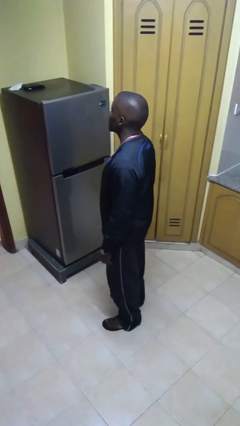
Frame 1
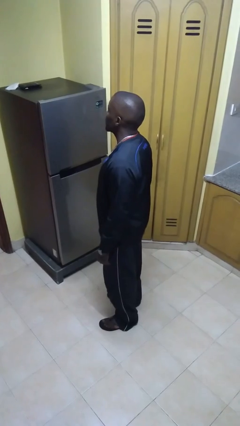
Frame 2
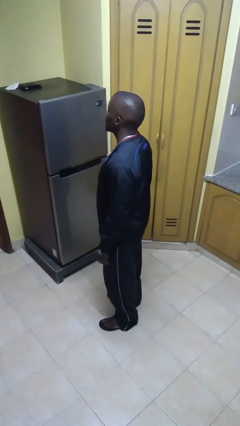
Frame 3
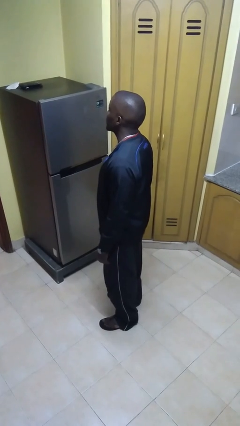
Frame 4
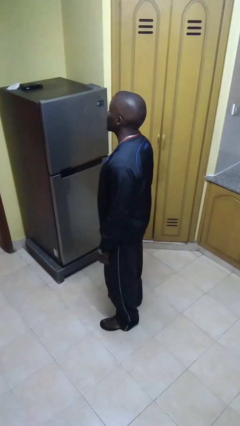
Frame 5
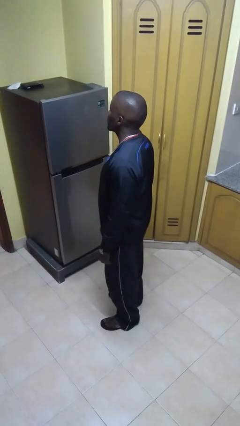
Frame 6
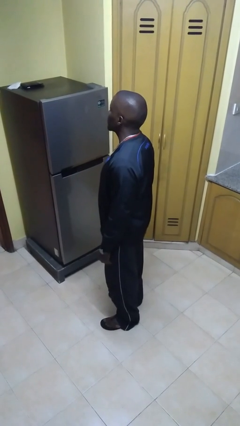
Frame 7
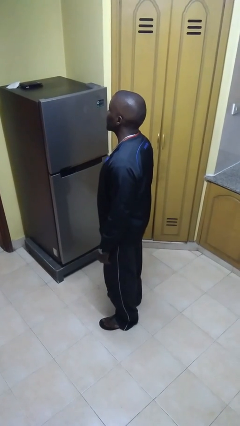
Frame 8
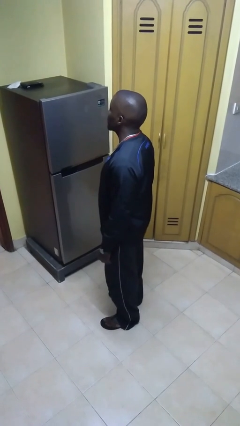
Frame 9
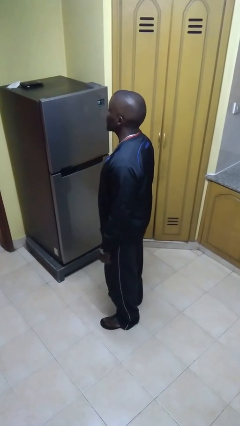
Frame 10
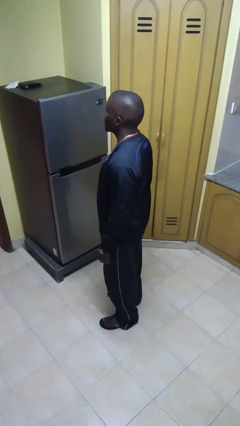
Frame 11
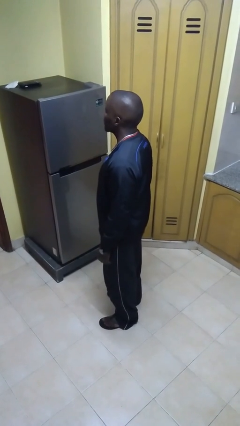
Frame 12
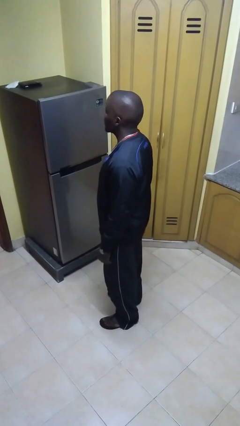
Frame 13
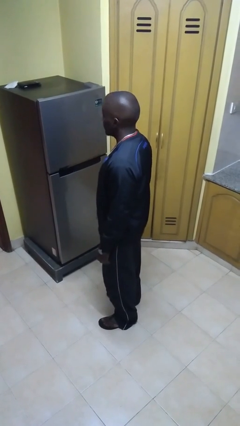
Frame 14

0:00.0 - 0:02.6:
person washes hands

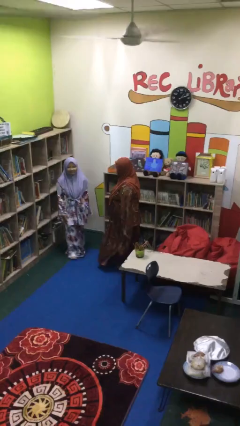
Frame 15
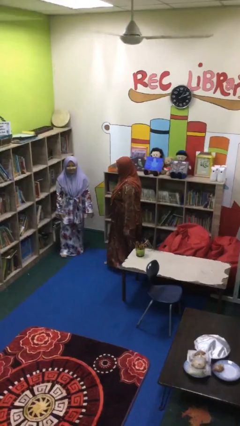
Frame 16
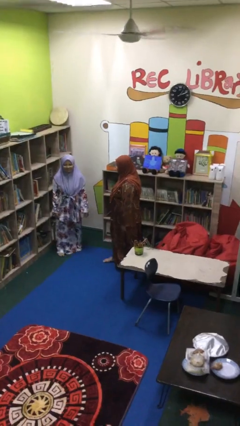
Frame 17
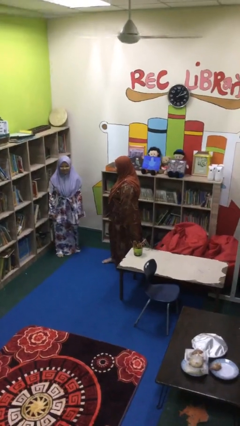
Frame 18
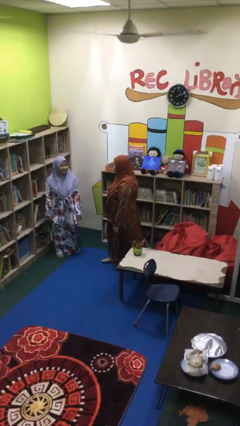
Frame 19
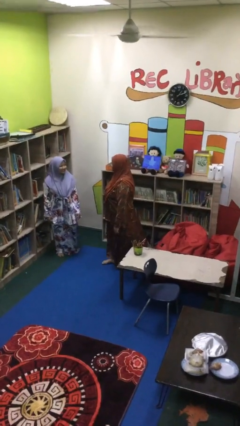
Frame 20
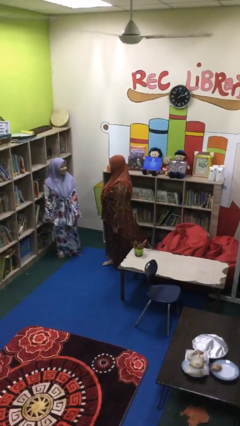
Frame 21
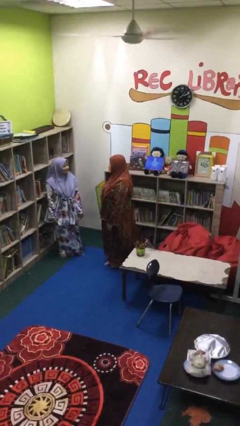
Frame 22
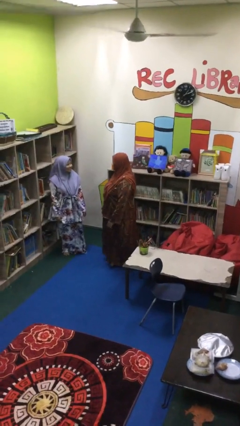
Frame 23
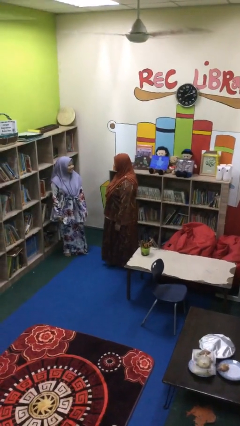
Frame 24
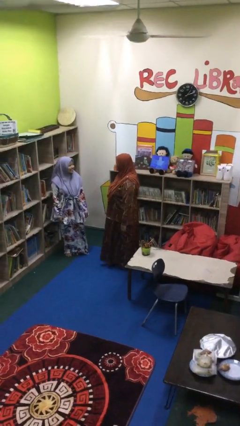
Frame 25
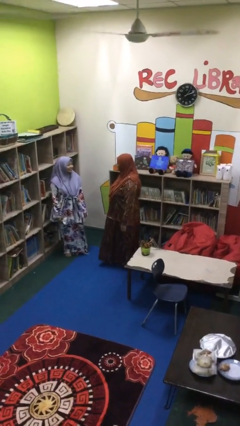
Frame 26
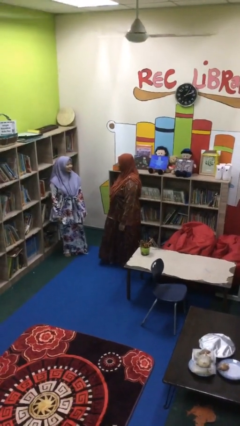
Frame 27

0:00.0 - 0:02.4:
person talks to person

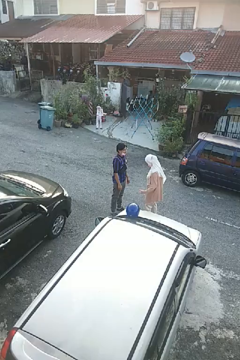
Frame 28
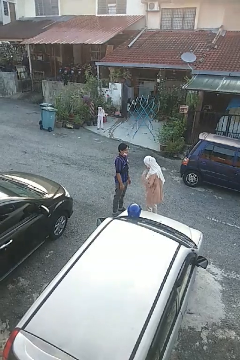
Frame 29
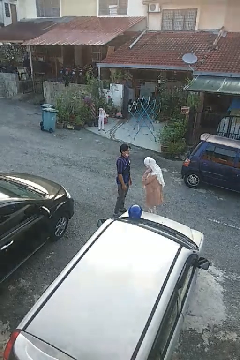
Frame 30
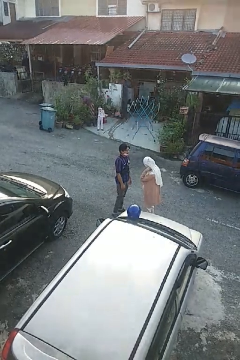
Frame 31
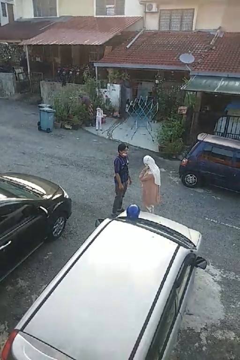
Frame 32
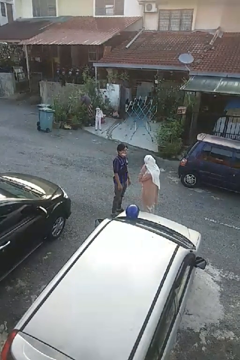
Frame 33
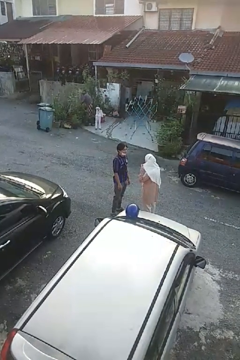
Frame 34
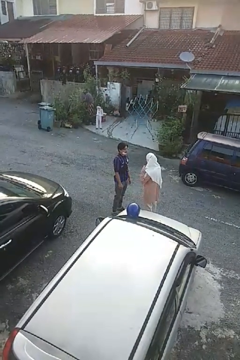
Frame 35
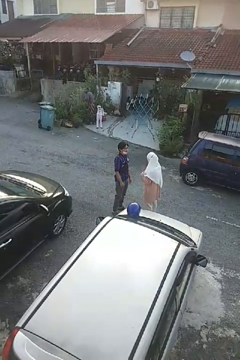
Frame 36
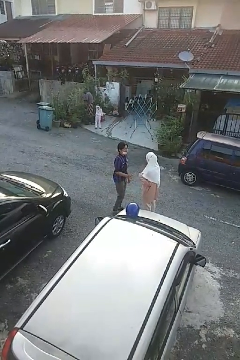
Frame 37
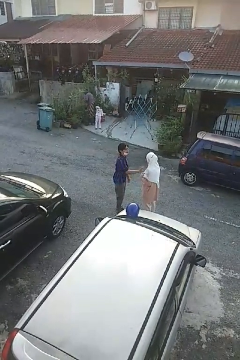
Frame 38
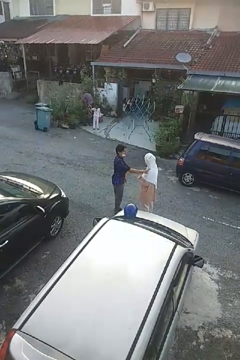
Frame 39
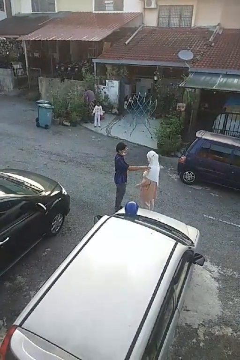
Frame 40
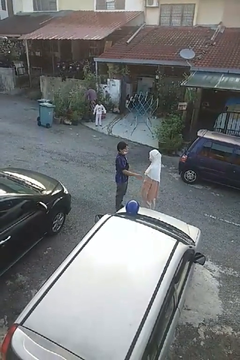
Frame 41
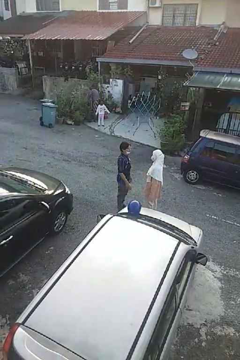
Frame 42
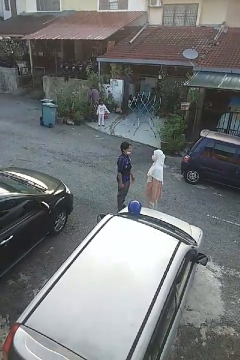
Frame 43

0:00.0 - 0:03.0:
person shoves person

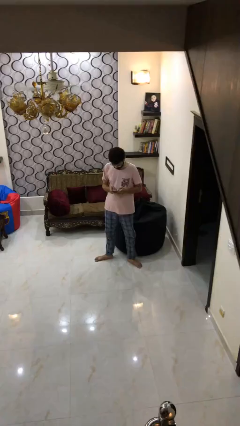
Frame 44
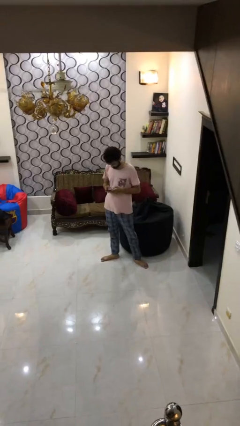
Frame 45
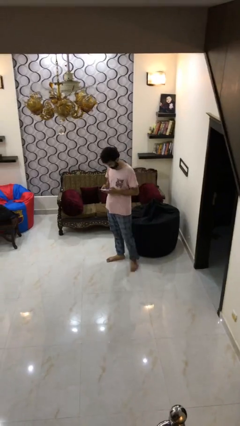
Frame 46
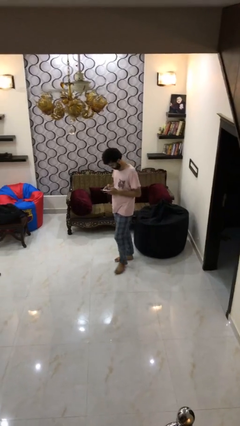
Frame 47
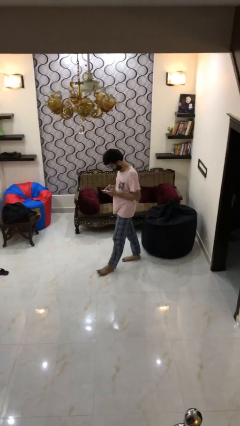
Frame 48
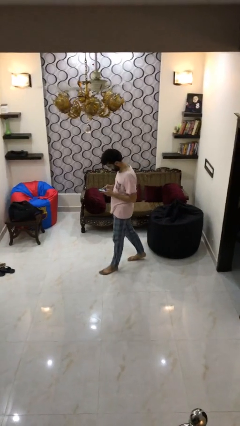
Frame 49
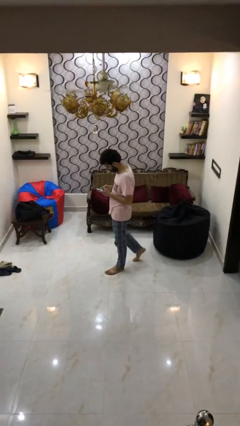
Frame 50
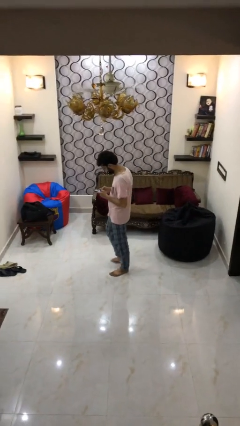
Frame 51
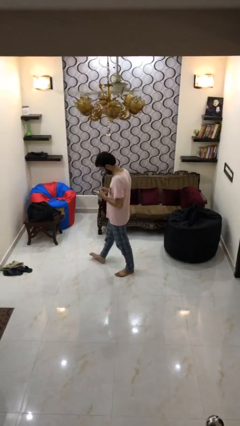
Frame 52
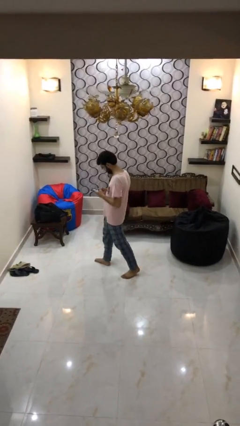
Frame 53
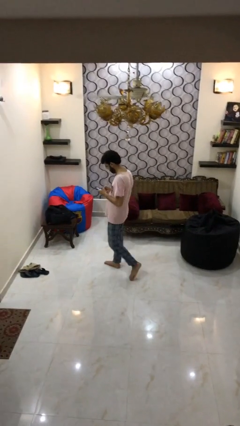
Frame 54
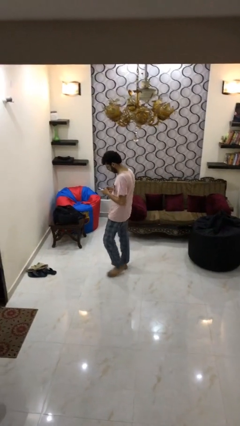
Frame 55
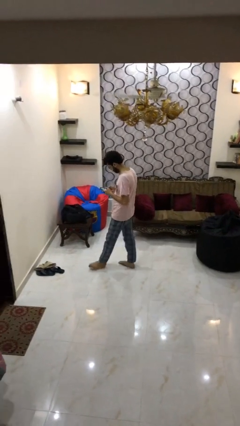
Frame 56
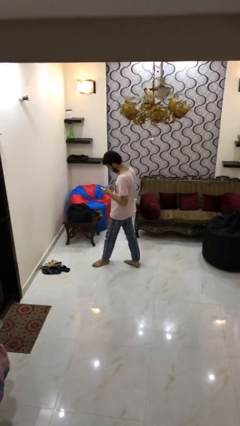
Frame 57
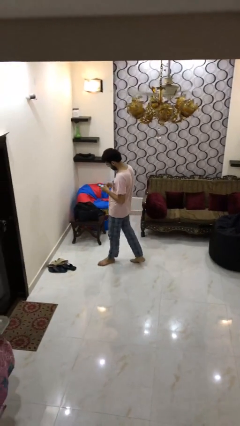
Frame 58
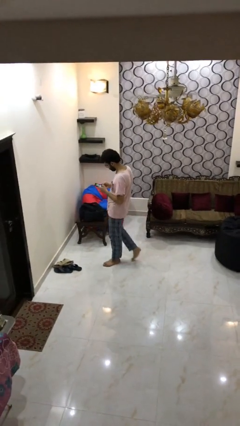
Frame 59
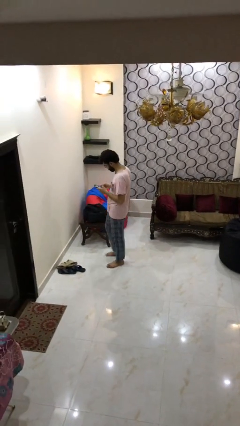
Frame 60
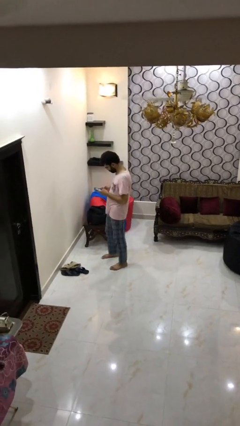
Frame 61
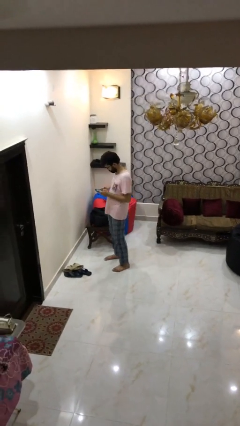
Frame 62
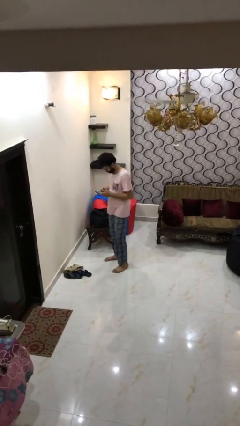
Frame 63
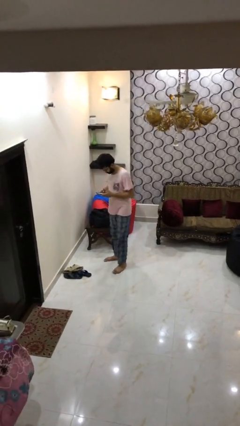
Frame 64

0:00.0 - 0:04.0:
person texts on phone

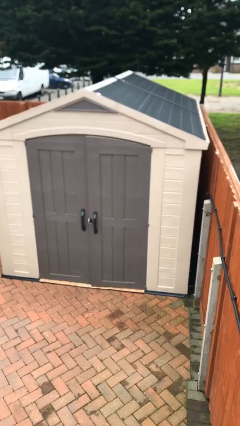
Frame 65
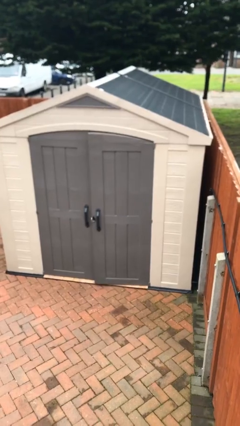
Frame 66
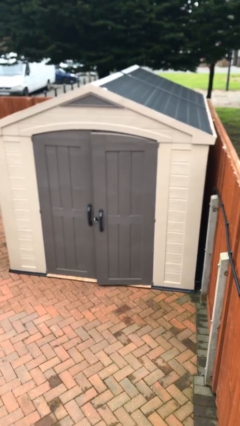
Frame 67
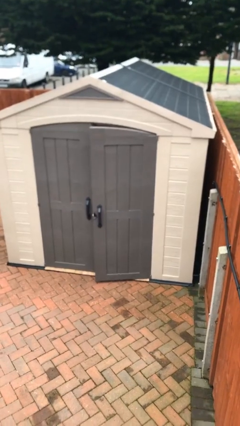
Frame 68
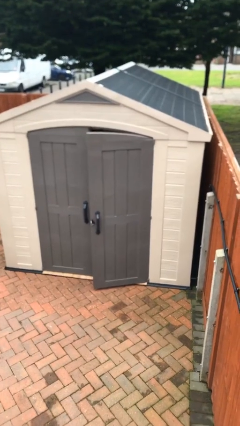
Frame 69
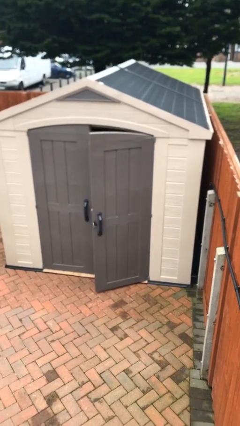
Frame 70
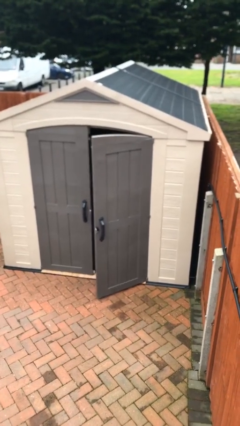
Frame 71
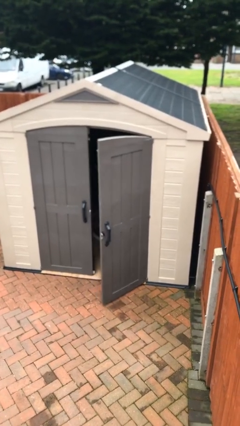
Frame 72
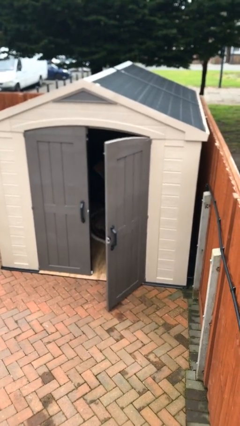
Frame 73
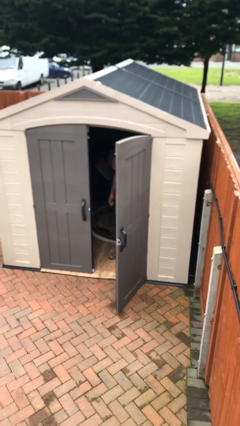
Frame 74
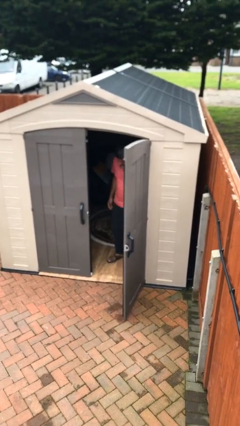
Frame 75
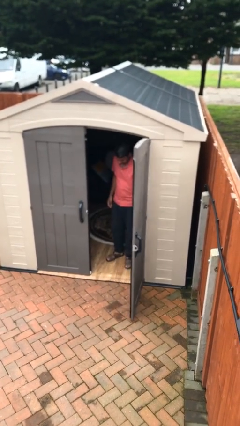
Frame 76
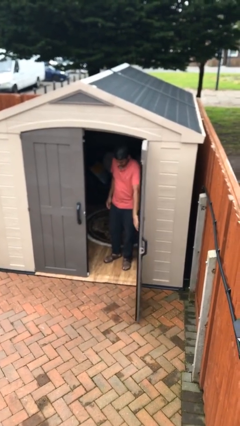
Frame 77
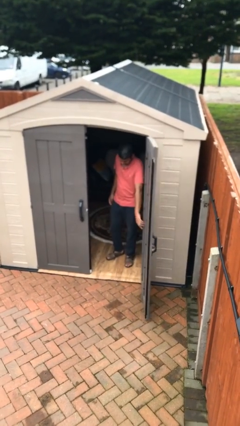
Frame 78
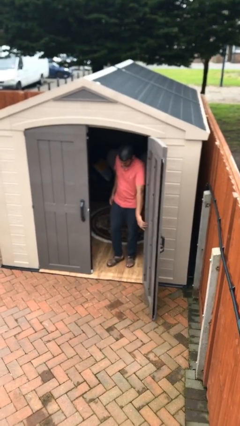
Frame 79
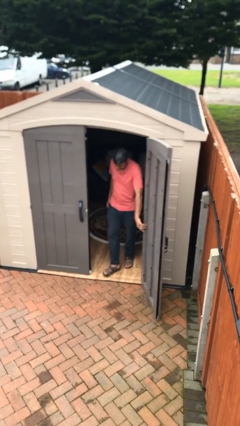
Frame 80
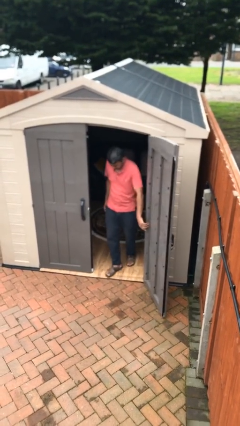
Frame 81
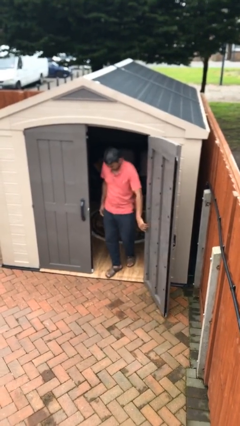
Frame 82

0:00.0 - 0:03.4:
person opens facility door

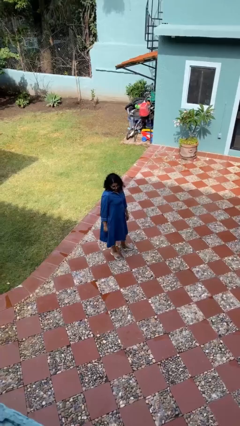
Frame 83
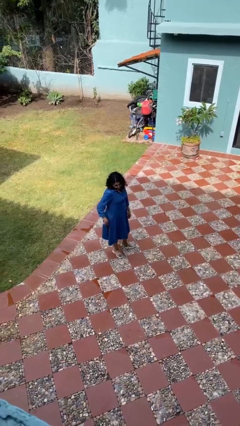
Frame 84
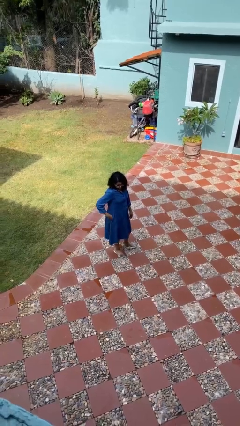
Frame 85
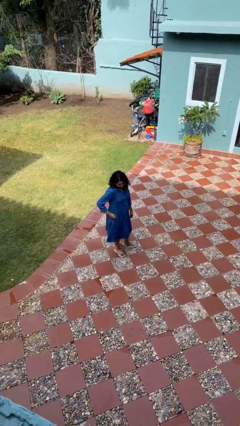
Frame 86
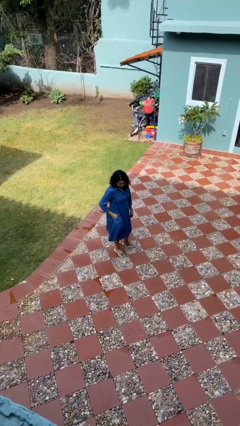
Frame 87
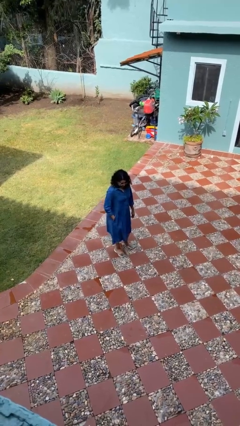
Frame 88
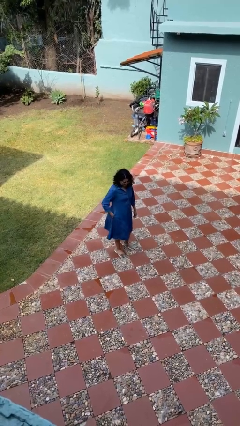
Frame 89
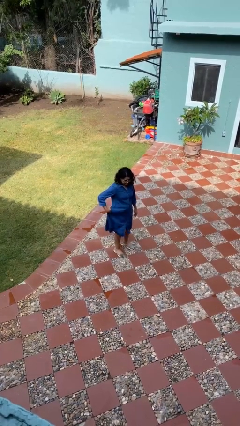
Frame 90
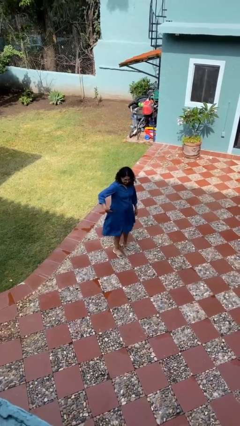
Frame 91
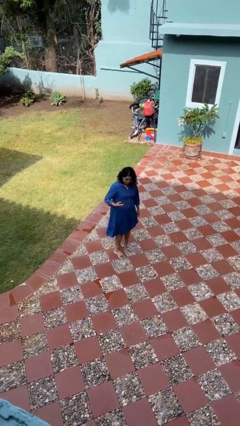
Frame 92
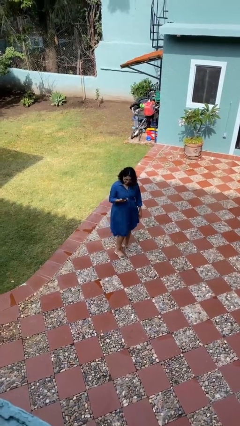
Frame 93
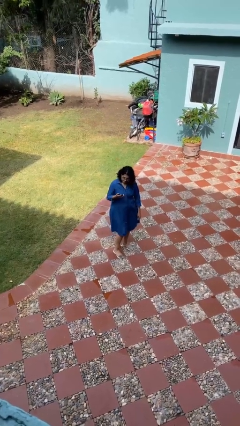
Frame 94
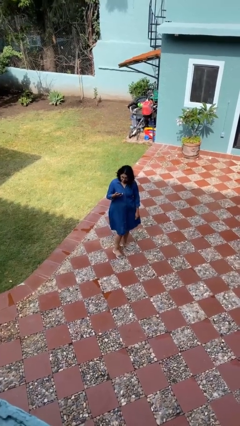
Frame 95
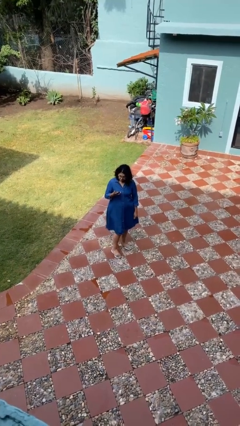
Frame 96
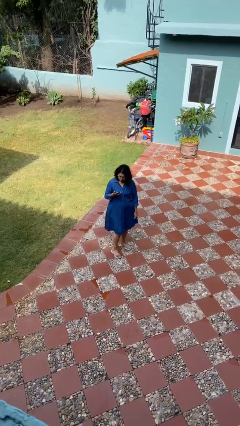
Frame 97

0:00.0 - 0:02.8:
person takes phone from pocket
